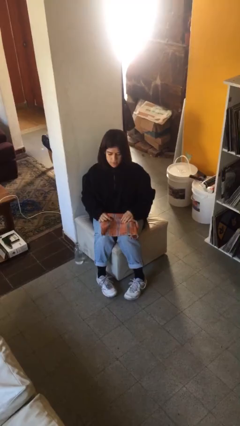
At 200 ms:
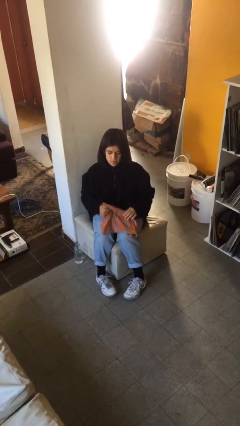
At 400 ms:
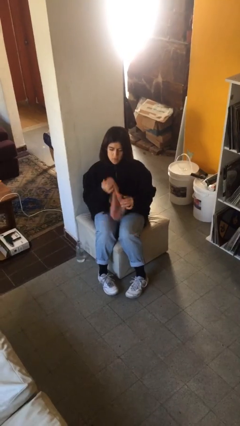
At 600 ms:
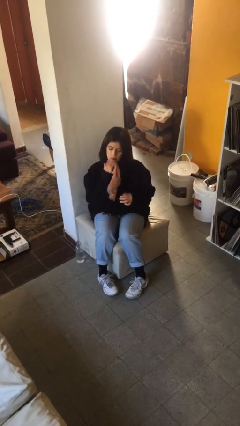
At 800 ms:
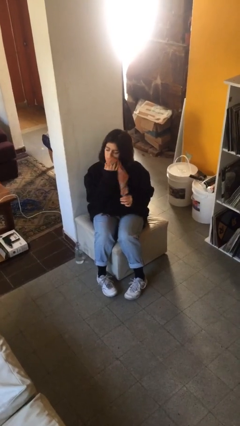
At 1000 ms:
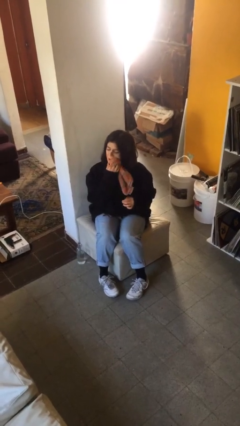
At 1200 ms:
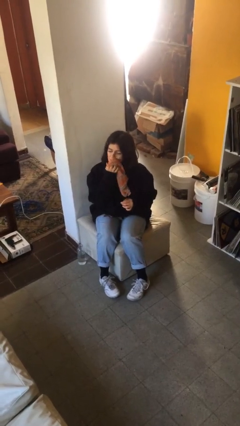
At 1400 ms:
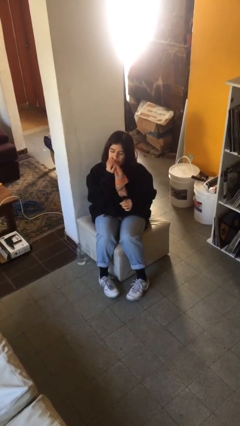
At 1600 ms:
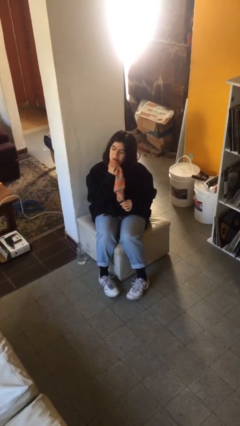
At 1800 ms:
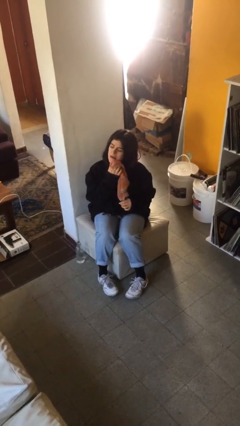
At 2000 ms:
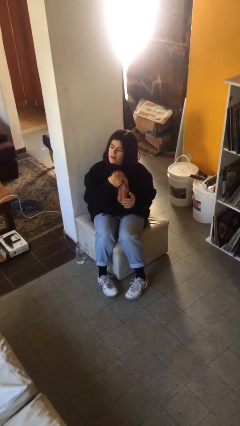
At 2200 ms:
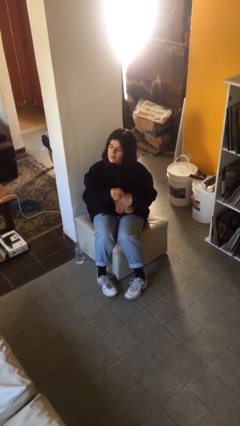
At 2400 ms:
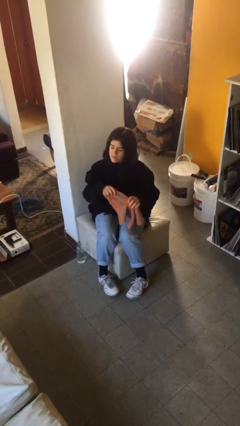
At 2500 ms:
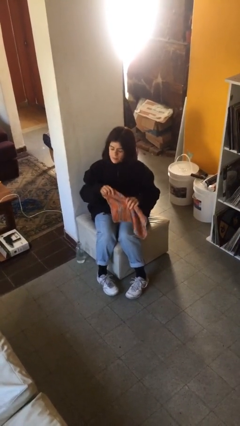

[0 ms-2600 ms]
person wipes mouth with napkin

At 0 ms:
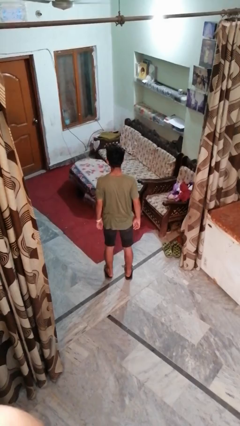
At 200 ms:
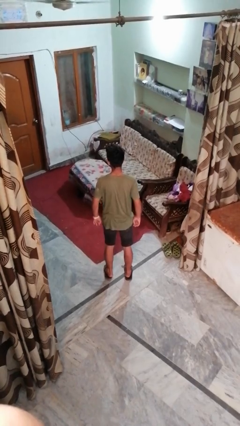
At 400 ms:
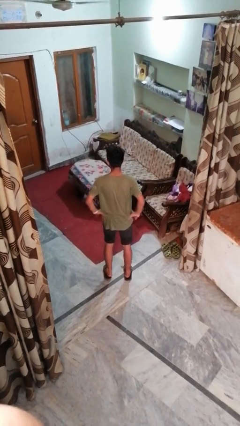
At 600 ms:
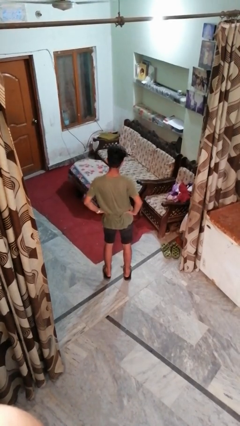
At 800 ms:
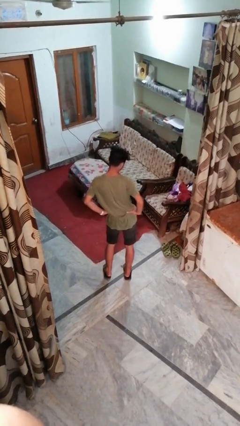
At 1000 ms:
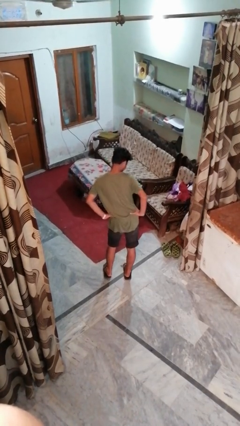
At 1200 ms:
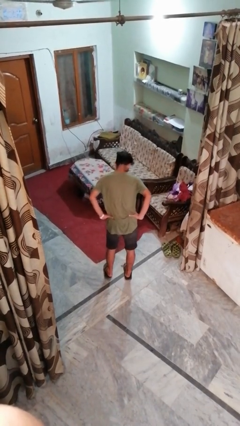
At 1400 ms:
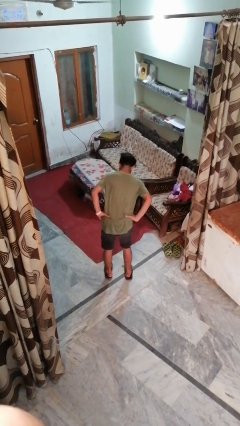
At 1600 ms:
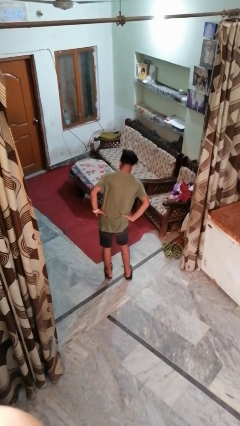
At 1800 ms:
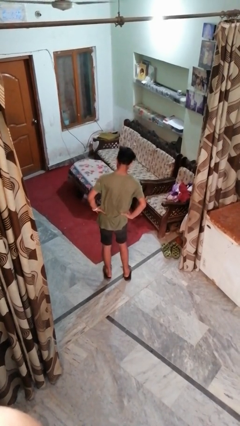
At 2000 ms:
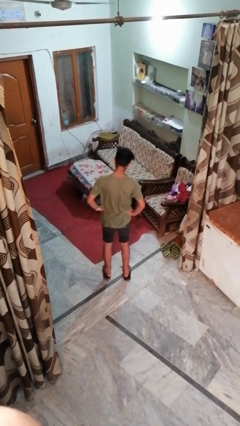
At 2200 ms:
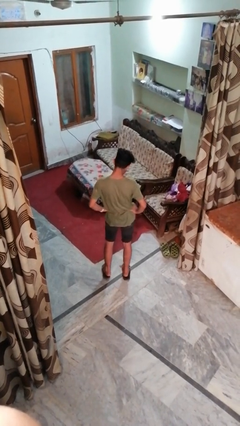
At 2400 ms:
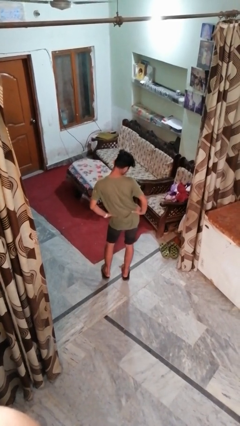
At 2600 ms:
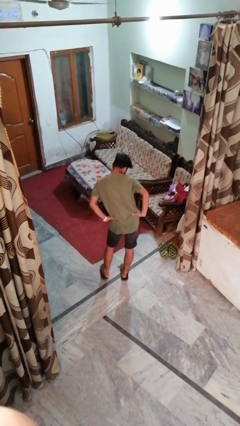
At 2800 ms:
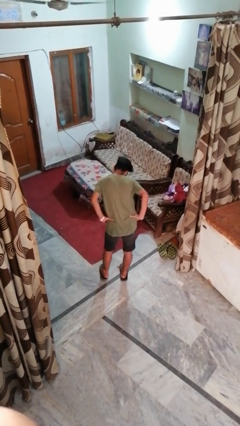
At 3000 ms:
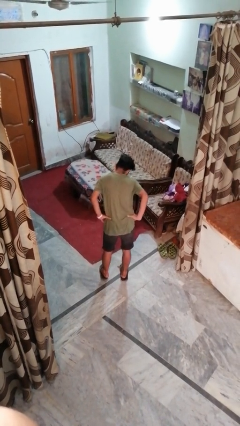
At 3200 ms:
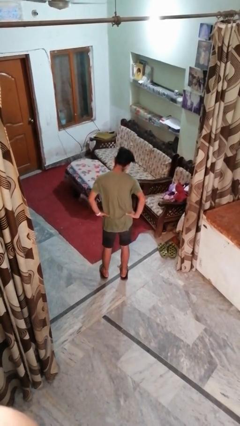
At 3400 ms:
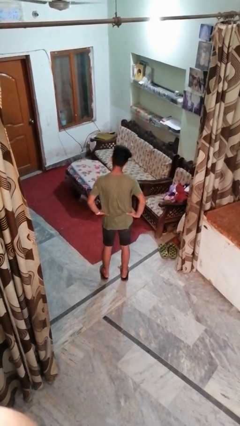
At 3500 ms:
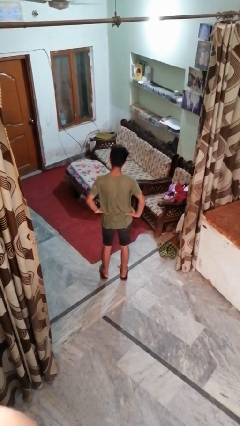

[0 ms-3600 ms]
person wiggles hips

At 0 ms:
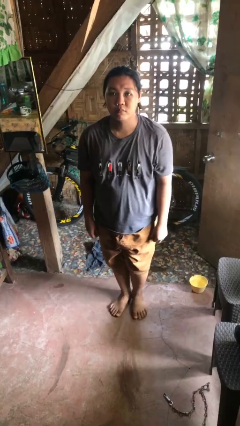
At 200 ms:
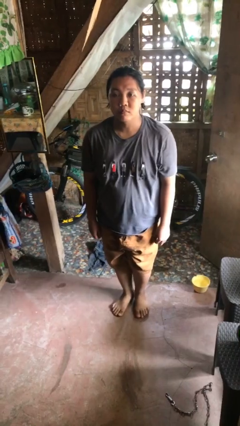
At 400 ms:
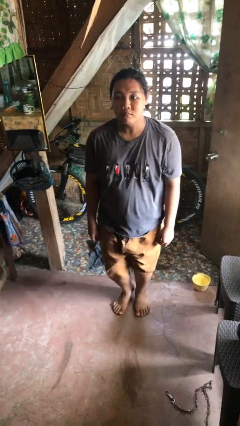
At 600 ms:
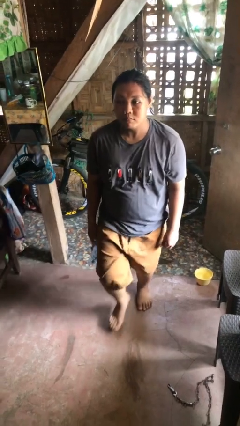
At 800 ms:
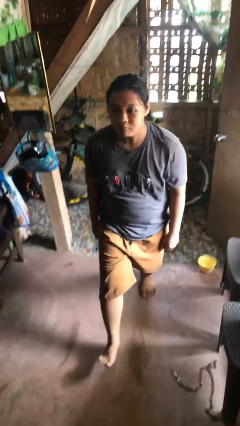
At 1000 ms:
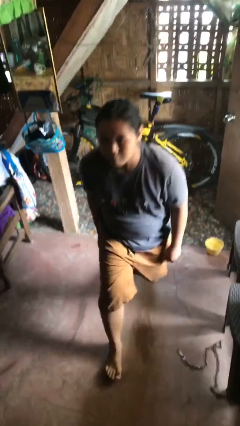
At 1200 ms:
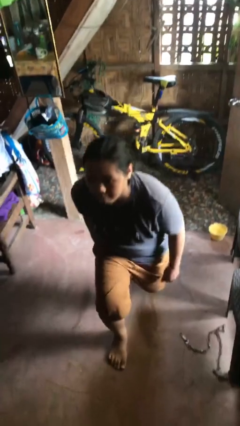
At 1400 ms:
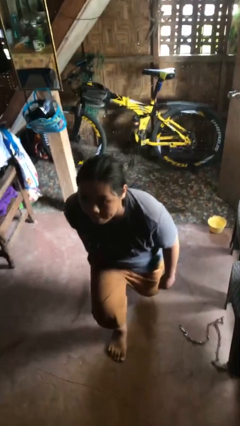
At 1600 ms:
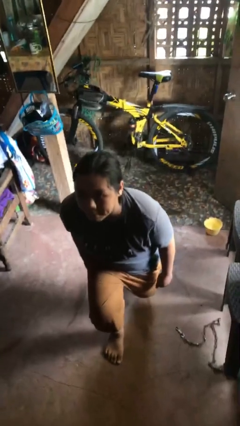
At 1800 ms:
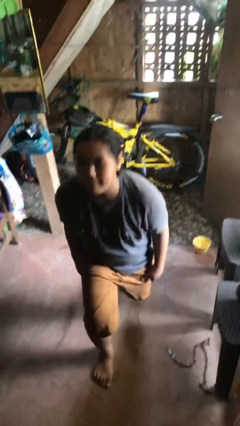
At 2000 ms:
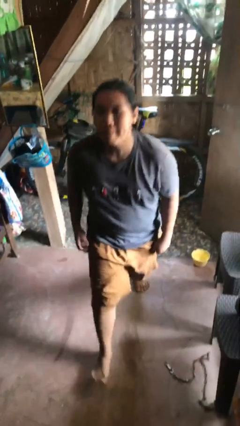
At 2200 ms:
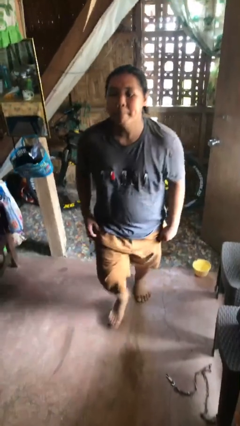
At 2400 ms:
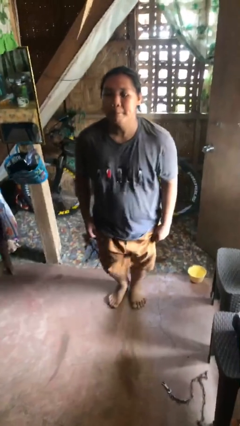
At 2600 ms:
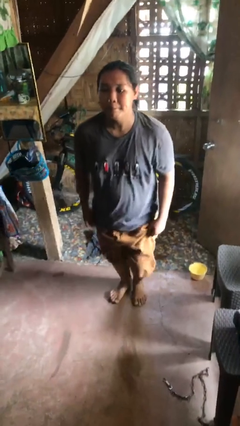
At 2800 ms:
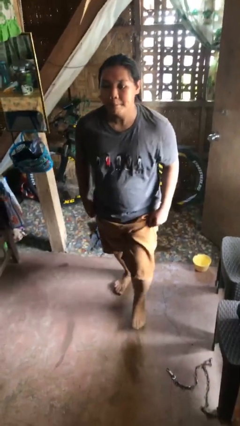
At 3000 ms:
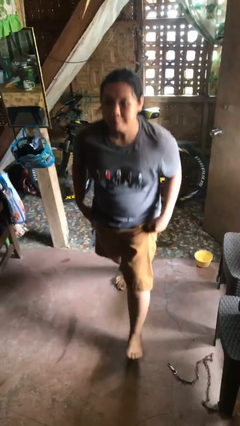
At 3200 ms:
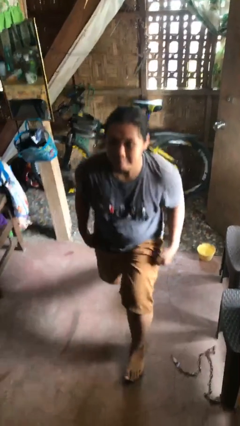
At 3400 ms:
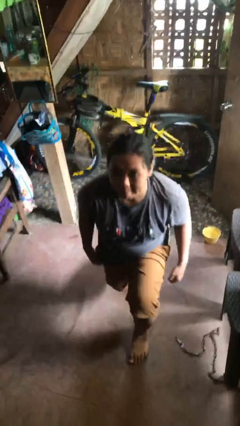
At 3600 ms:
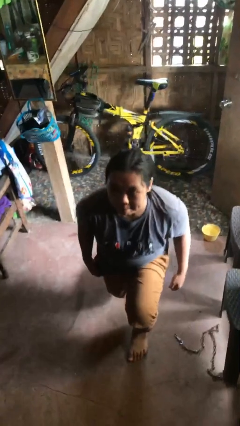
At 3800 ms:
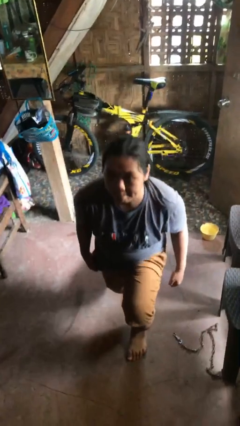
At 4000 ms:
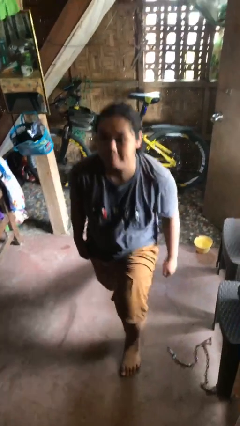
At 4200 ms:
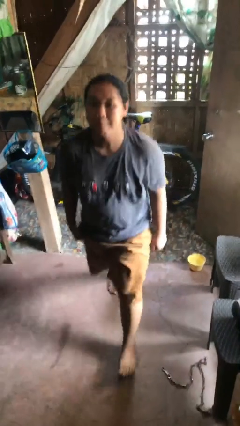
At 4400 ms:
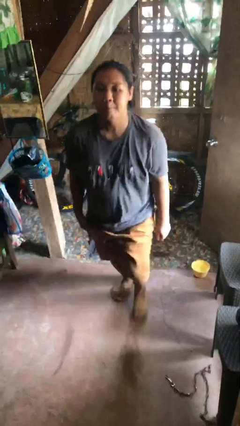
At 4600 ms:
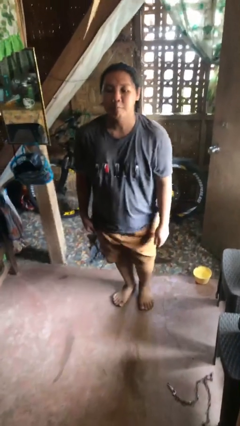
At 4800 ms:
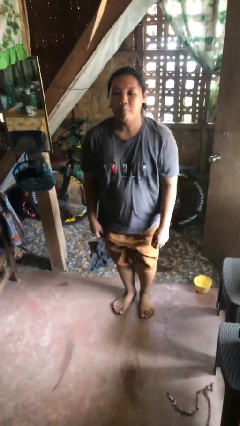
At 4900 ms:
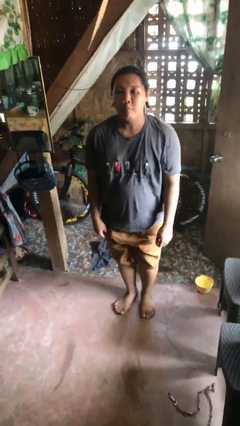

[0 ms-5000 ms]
person exercises with lunges

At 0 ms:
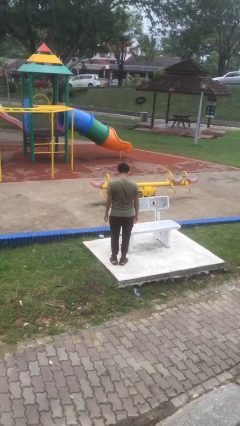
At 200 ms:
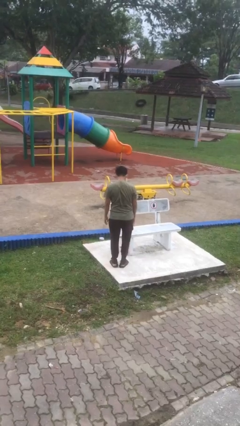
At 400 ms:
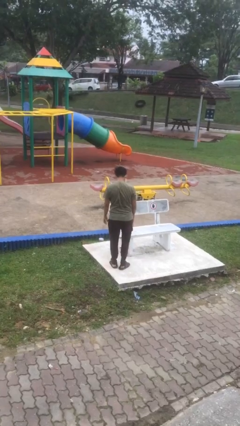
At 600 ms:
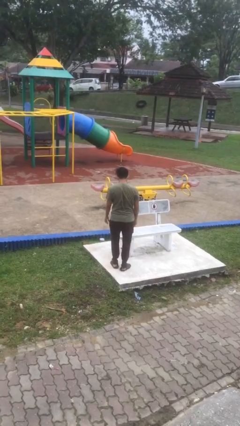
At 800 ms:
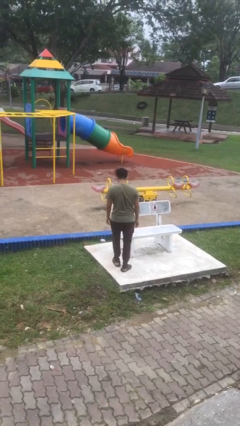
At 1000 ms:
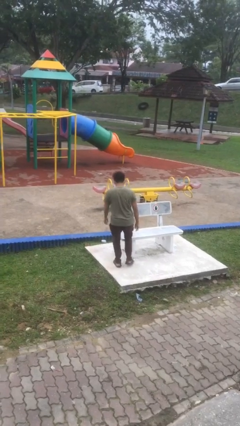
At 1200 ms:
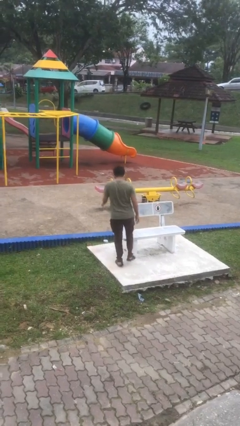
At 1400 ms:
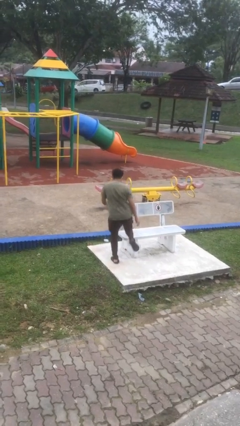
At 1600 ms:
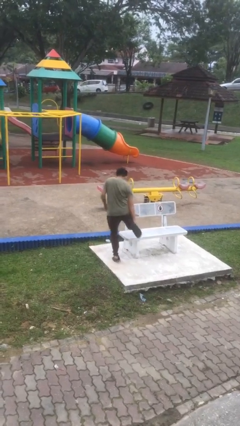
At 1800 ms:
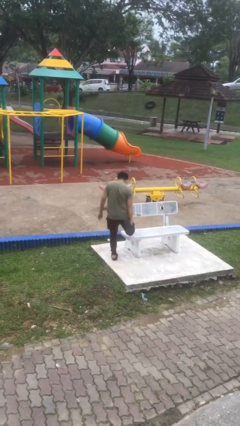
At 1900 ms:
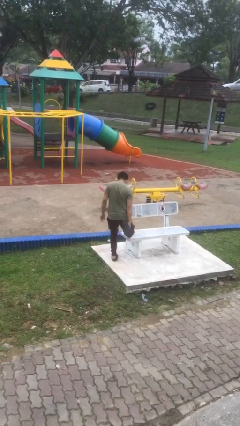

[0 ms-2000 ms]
person stubs toe

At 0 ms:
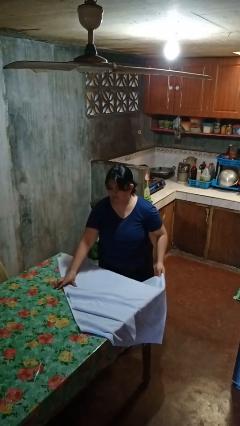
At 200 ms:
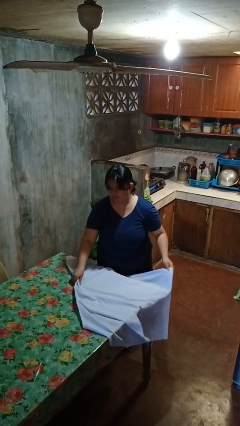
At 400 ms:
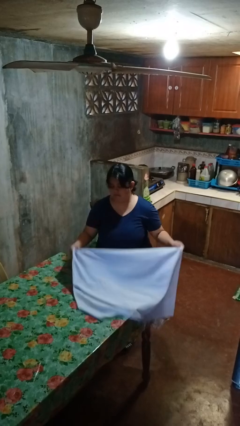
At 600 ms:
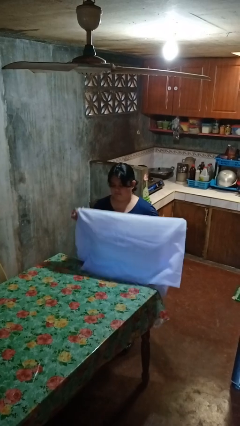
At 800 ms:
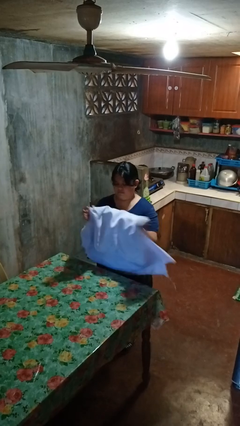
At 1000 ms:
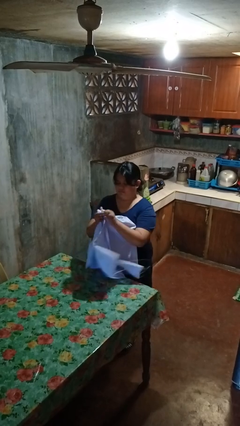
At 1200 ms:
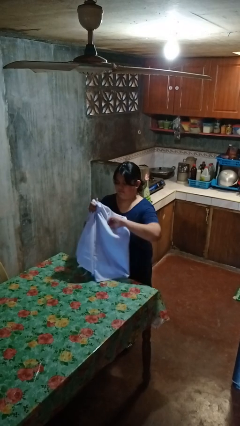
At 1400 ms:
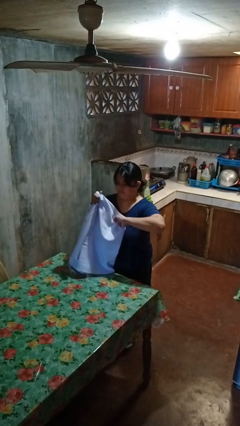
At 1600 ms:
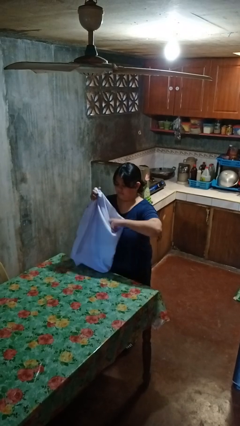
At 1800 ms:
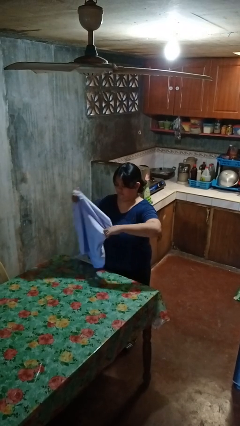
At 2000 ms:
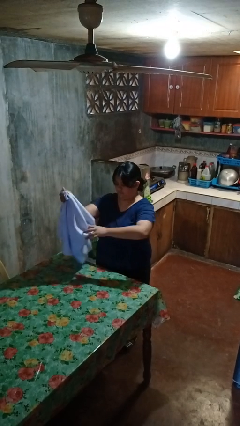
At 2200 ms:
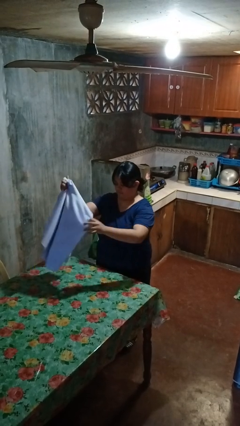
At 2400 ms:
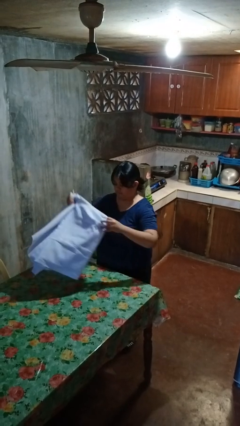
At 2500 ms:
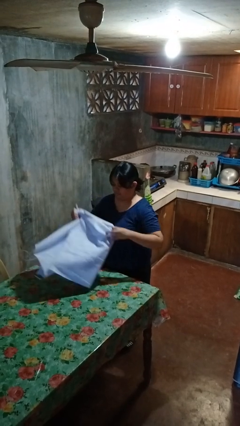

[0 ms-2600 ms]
person folds tablecloth

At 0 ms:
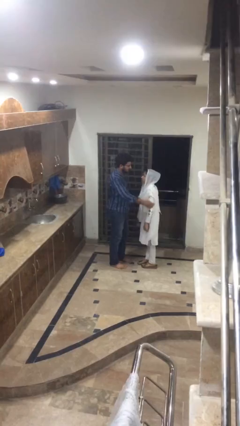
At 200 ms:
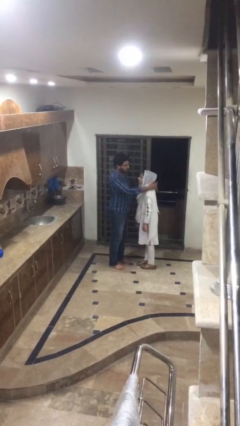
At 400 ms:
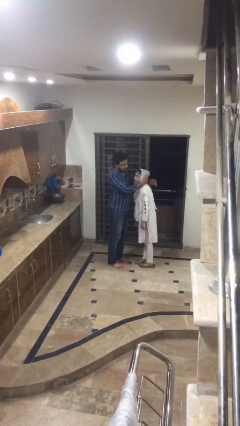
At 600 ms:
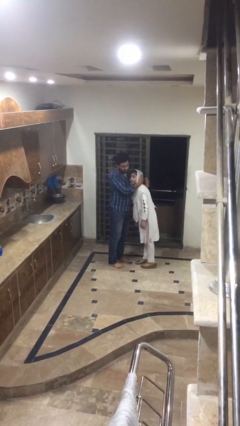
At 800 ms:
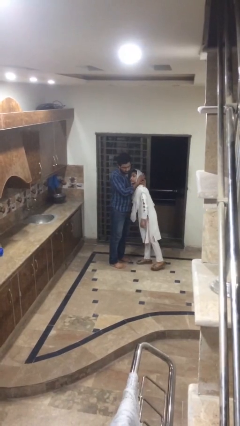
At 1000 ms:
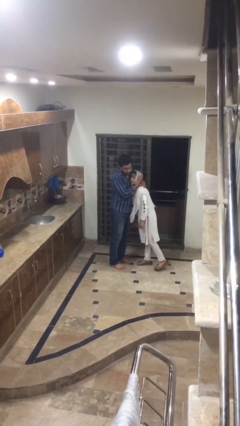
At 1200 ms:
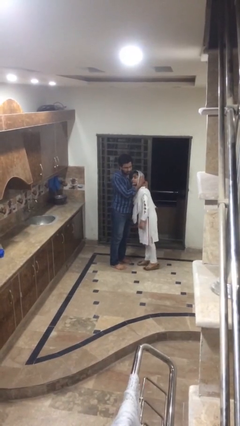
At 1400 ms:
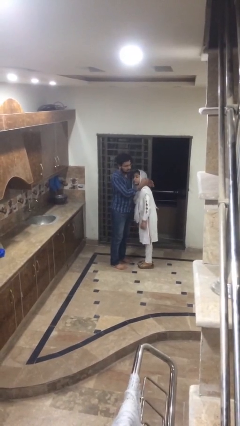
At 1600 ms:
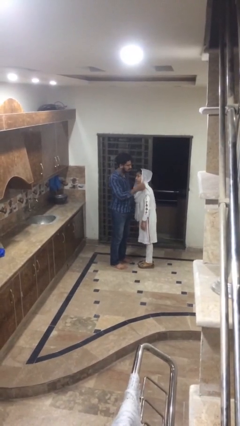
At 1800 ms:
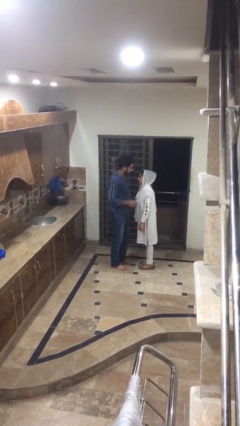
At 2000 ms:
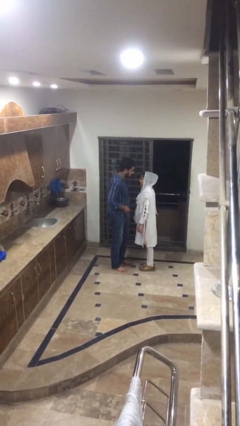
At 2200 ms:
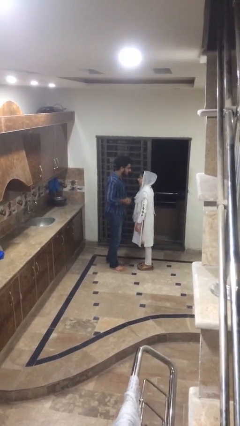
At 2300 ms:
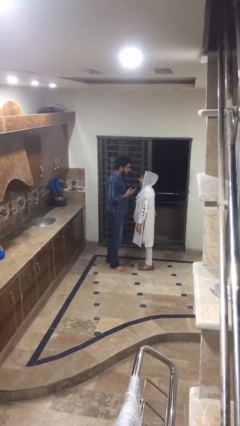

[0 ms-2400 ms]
person embraces person
